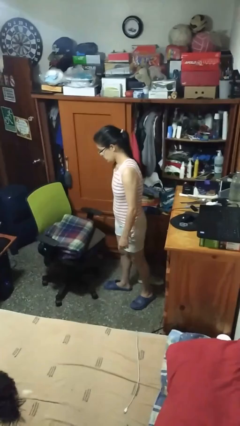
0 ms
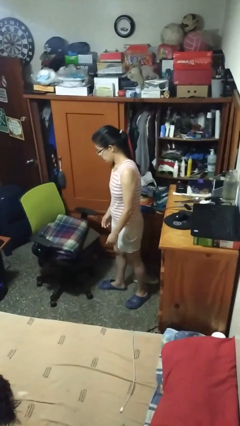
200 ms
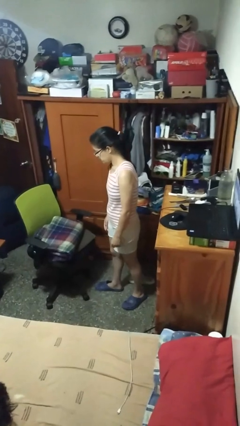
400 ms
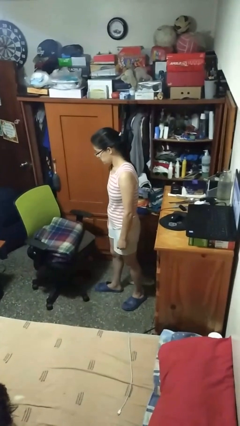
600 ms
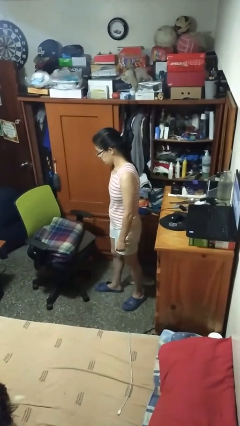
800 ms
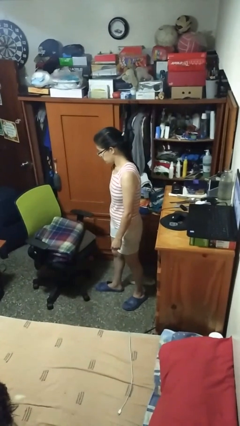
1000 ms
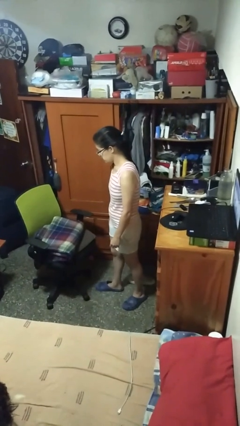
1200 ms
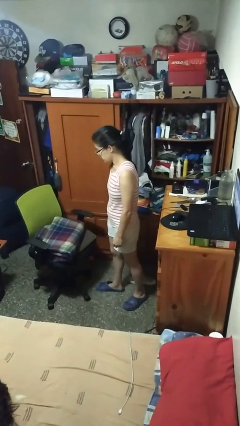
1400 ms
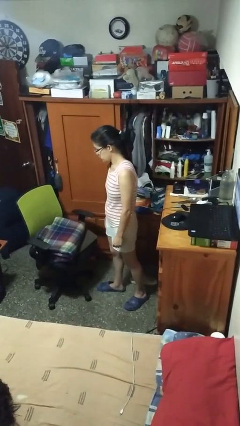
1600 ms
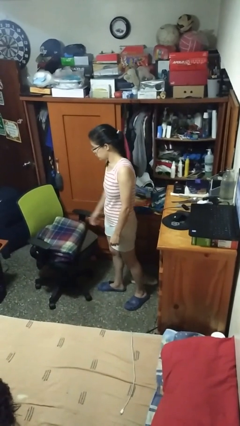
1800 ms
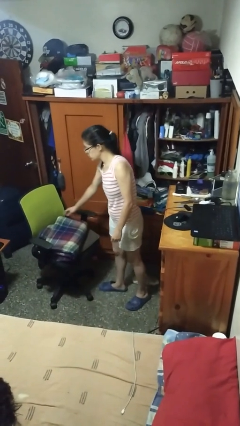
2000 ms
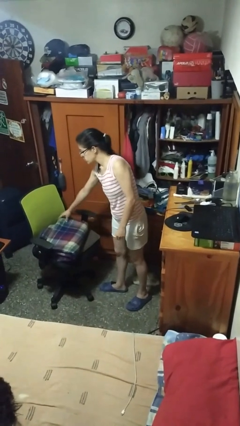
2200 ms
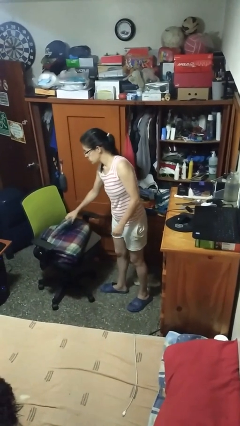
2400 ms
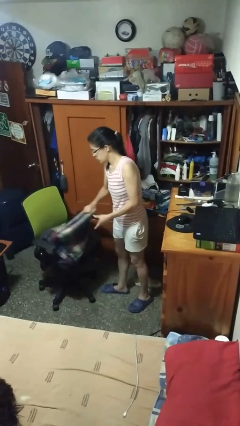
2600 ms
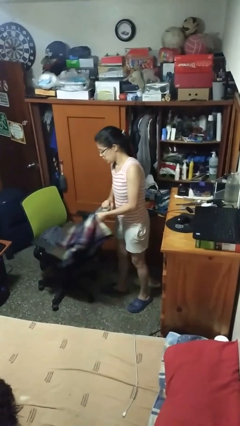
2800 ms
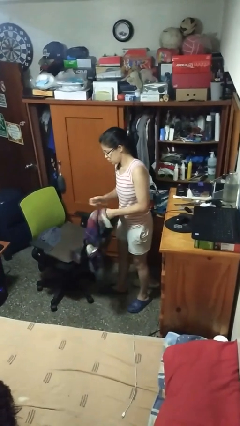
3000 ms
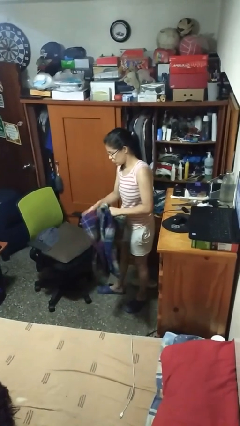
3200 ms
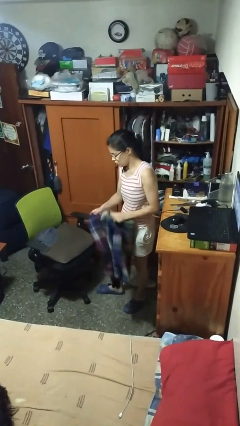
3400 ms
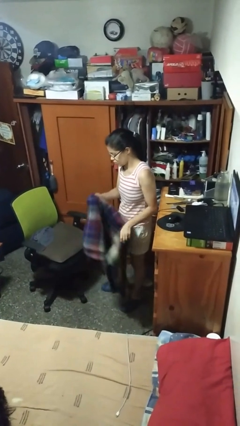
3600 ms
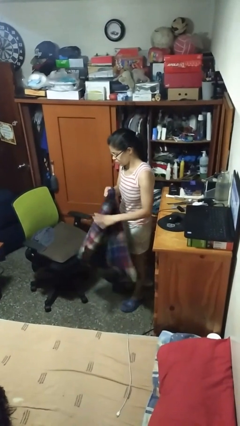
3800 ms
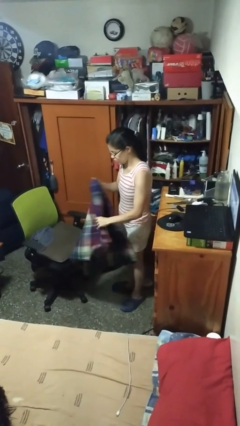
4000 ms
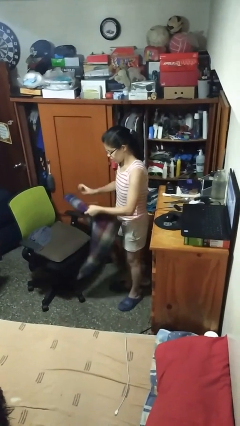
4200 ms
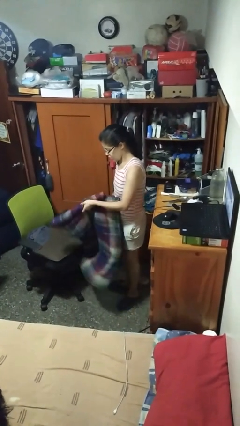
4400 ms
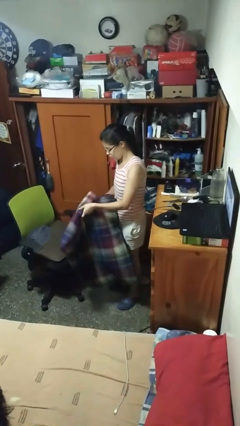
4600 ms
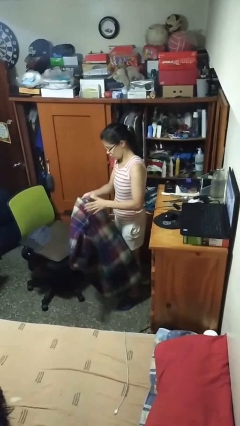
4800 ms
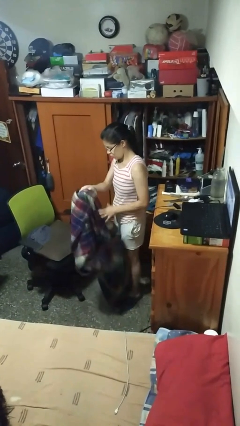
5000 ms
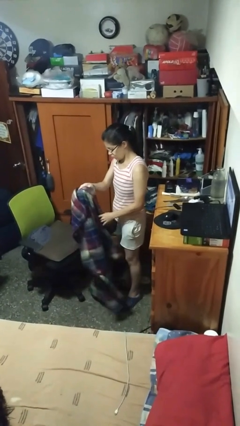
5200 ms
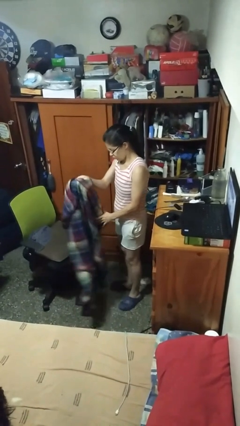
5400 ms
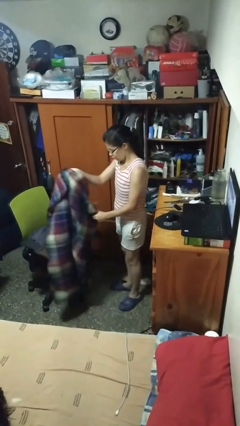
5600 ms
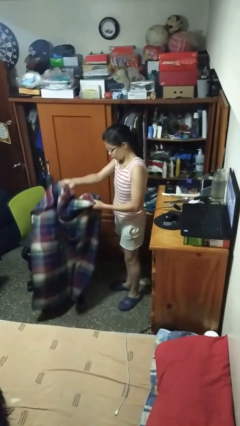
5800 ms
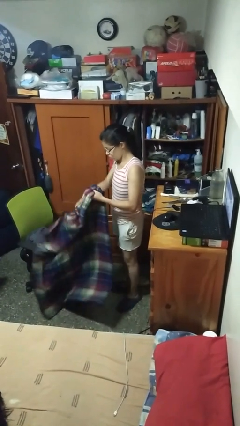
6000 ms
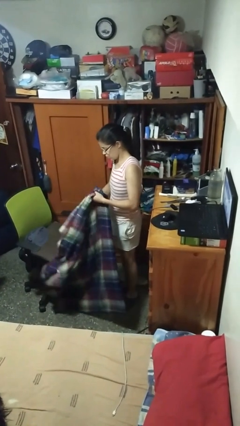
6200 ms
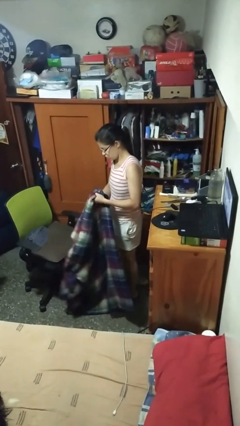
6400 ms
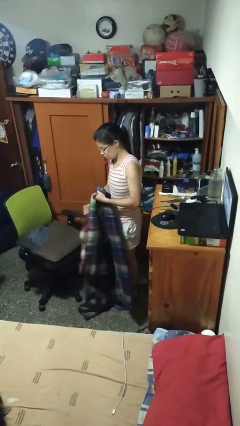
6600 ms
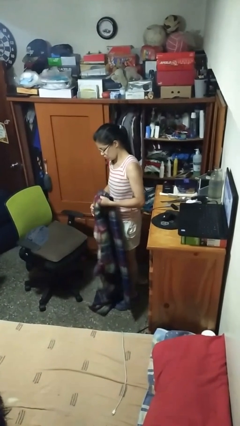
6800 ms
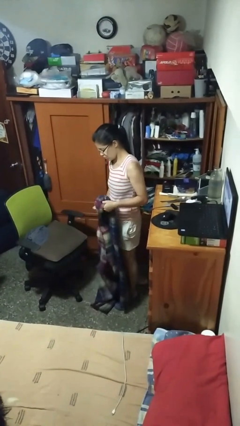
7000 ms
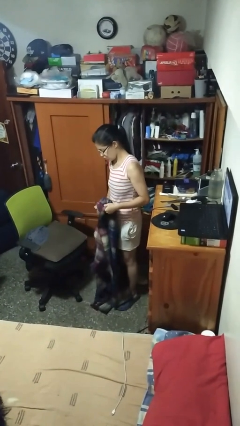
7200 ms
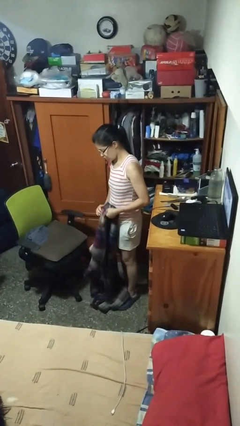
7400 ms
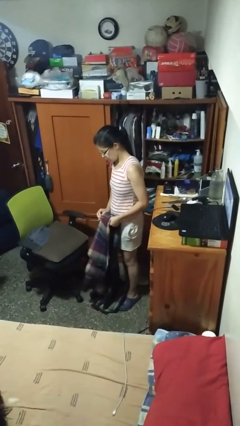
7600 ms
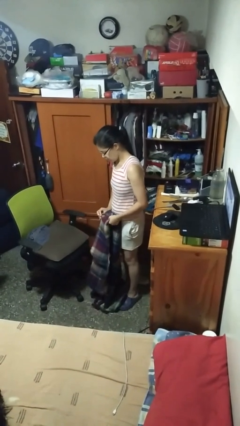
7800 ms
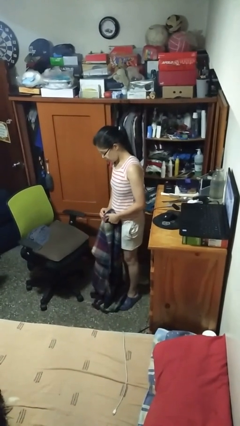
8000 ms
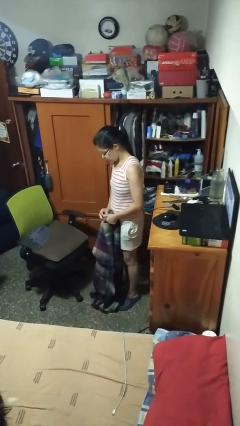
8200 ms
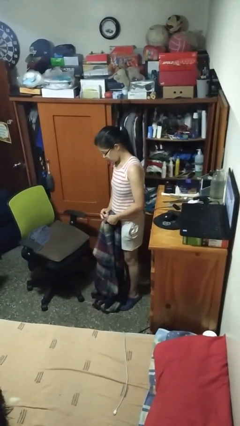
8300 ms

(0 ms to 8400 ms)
person unfolds blanket

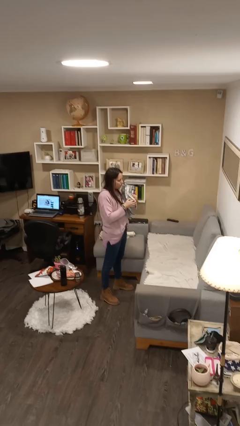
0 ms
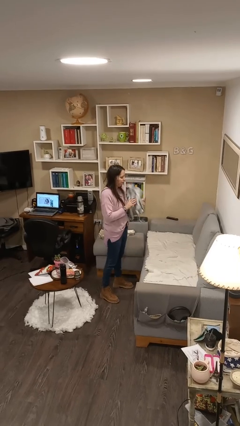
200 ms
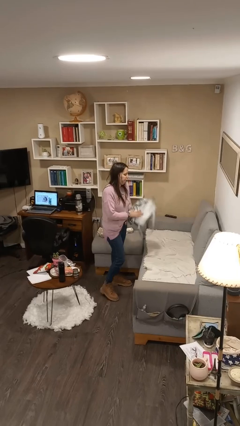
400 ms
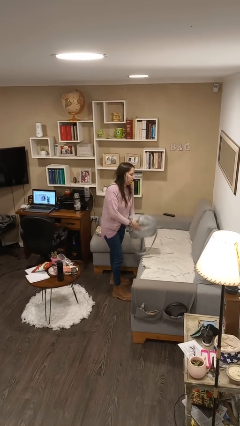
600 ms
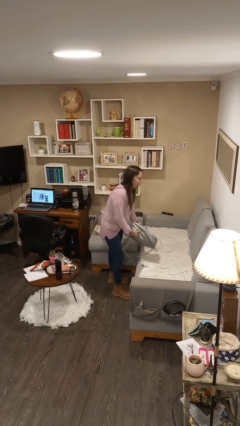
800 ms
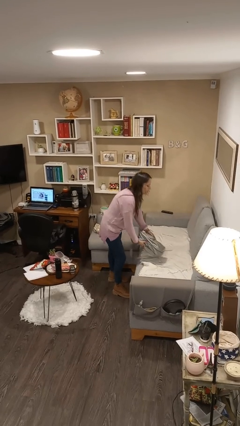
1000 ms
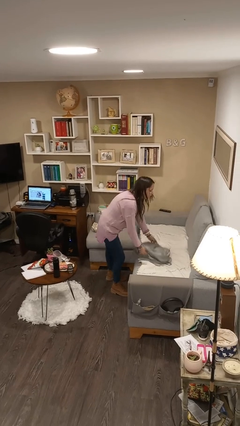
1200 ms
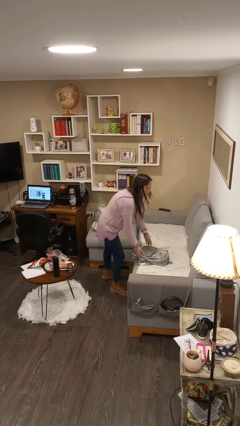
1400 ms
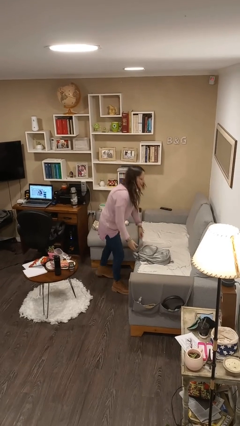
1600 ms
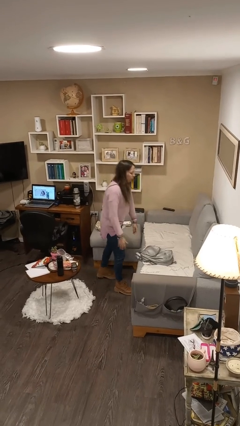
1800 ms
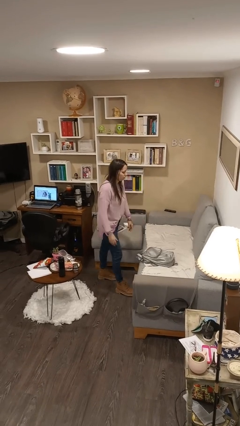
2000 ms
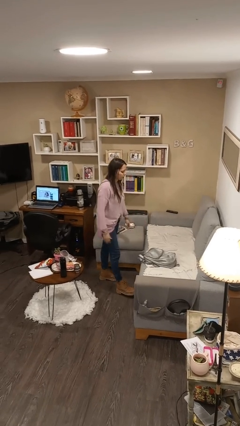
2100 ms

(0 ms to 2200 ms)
person puts down object on couch

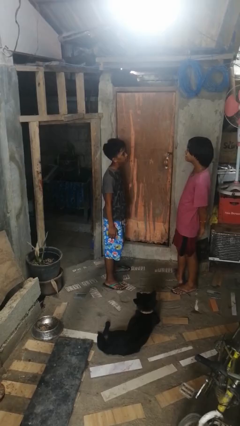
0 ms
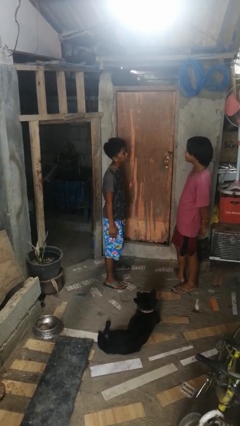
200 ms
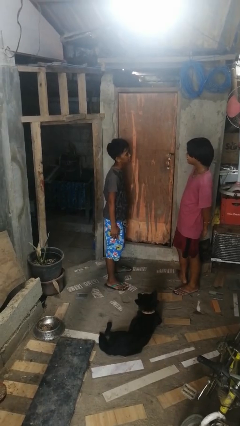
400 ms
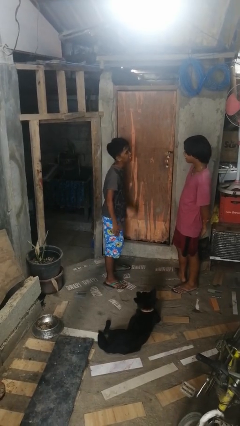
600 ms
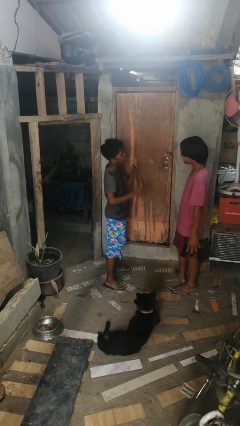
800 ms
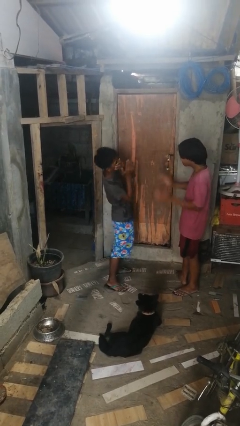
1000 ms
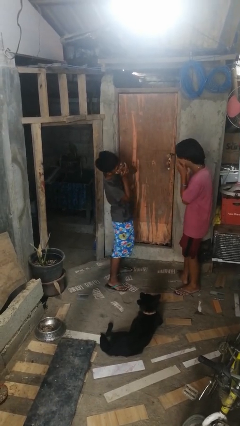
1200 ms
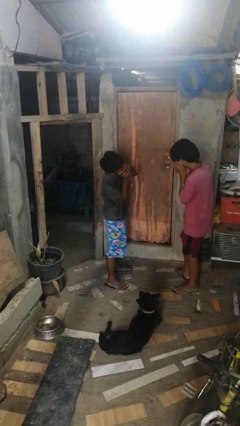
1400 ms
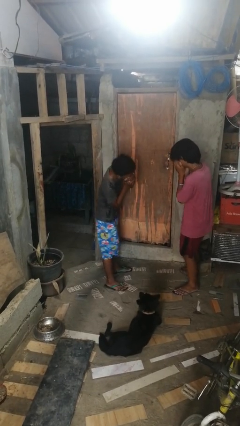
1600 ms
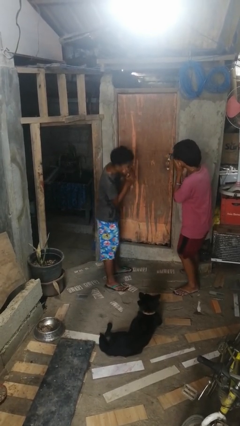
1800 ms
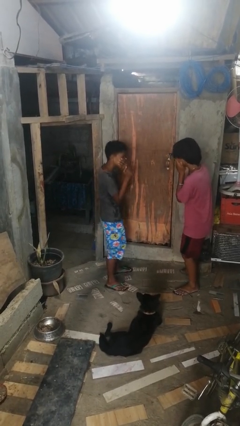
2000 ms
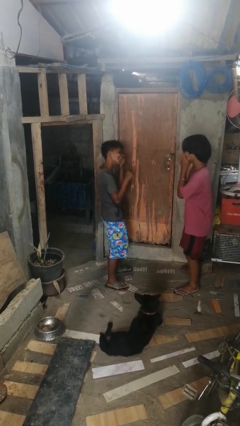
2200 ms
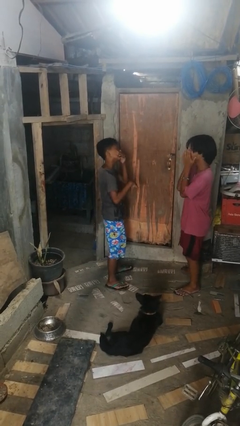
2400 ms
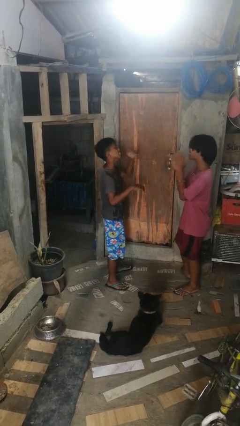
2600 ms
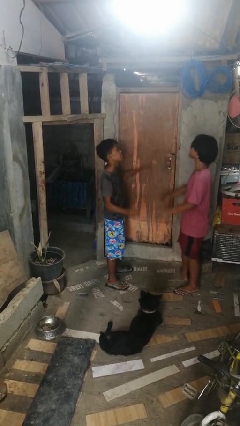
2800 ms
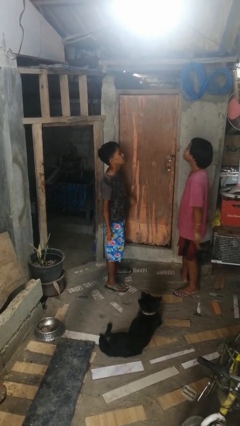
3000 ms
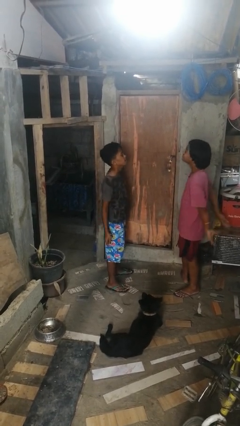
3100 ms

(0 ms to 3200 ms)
person laughs with person

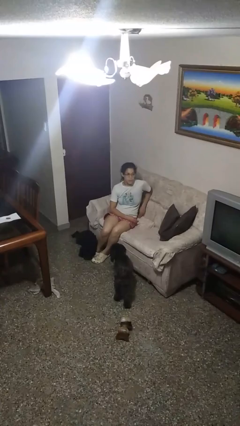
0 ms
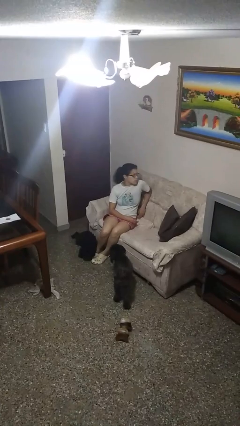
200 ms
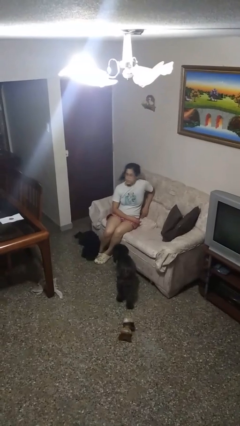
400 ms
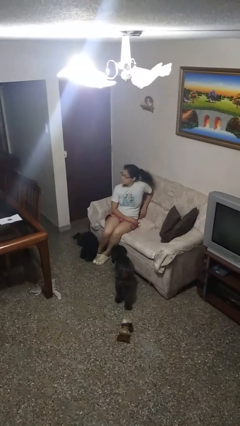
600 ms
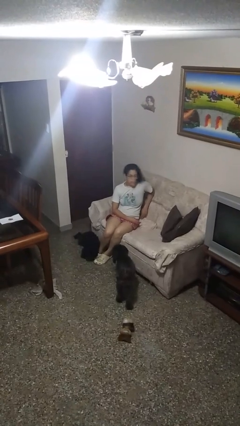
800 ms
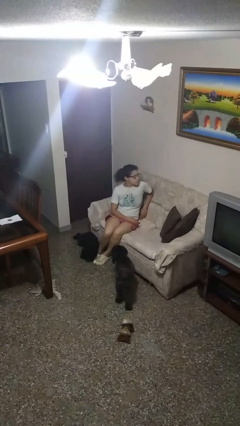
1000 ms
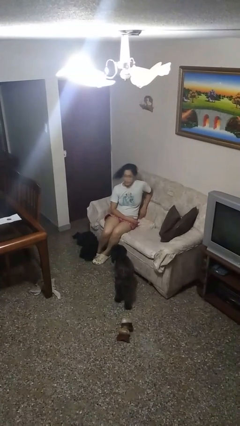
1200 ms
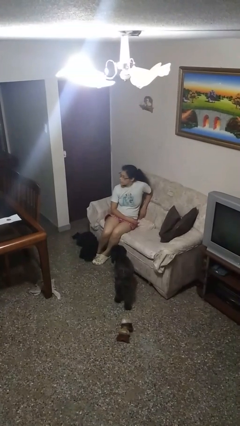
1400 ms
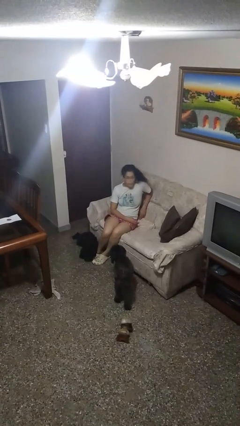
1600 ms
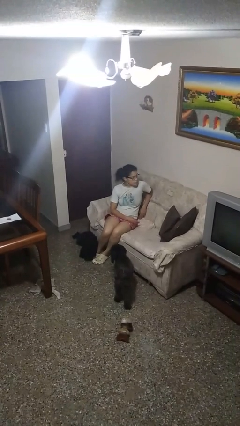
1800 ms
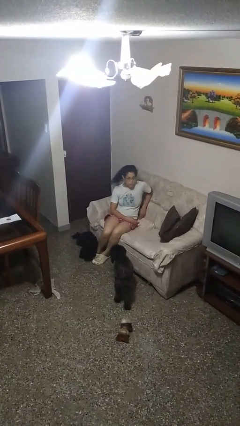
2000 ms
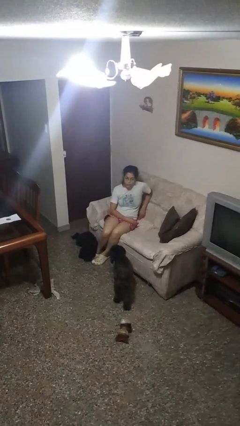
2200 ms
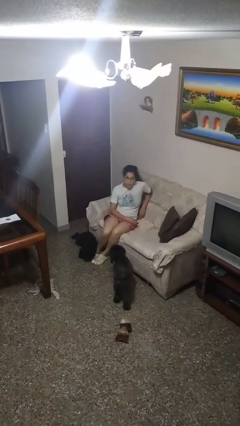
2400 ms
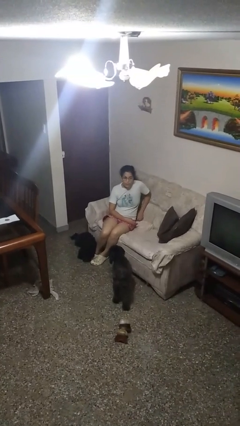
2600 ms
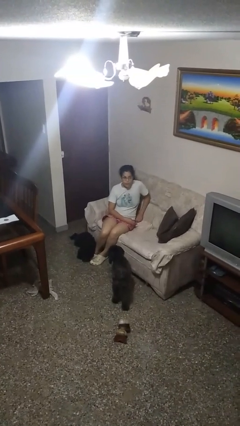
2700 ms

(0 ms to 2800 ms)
person shakes head

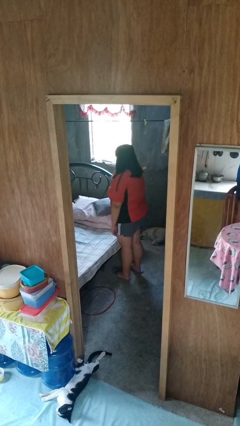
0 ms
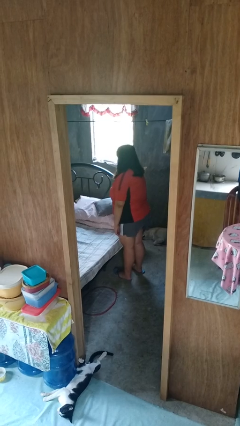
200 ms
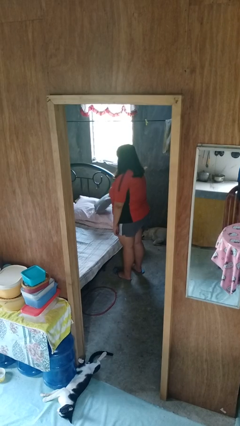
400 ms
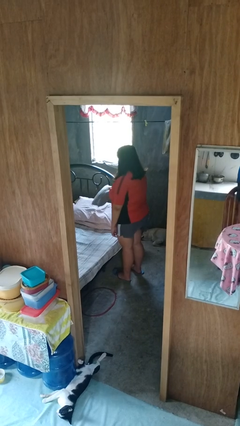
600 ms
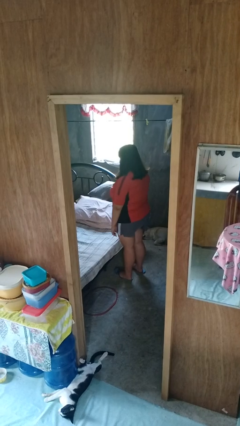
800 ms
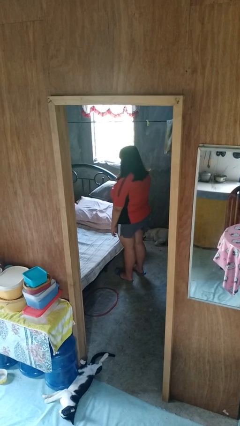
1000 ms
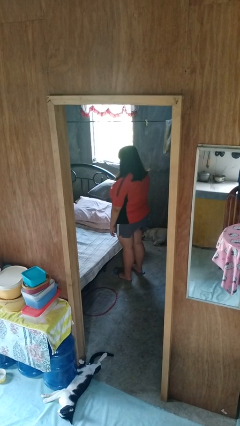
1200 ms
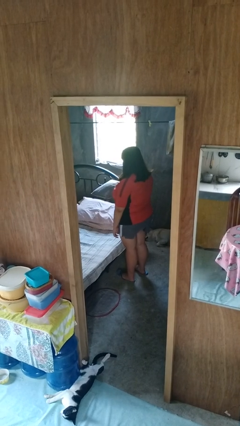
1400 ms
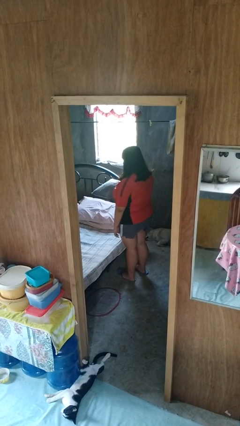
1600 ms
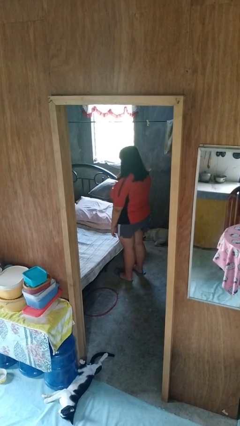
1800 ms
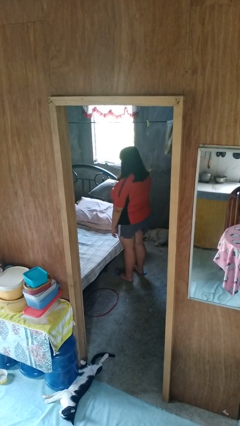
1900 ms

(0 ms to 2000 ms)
person picks up object from bed
